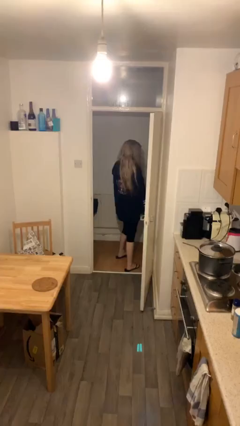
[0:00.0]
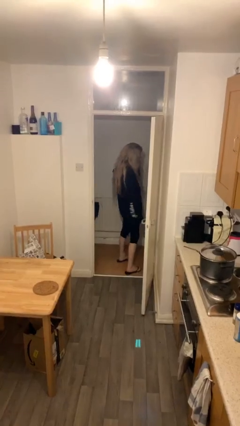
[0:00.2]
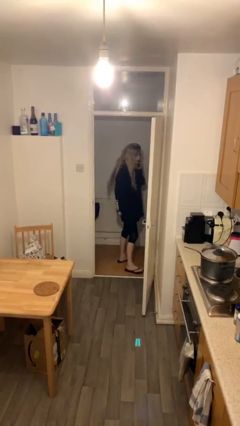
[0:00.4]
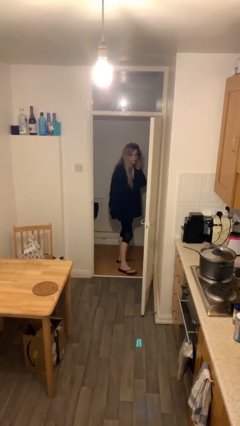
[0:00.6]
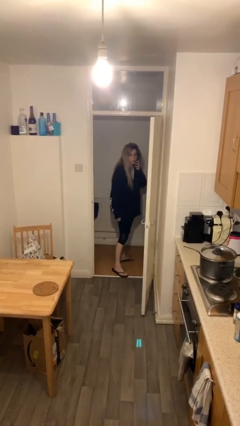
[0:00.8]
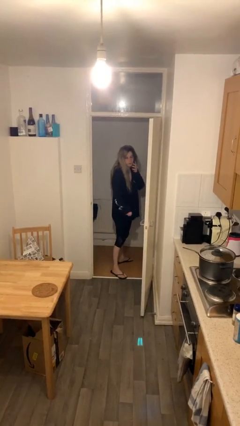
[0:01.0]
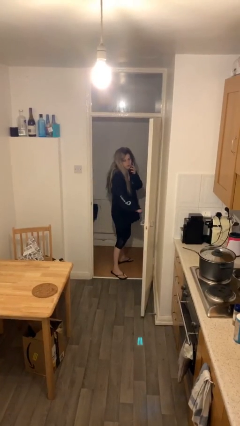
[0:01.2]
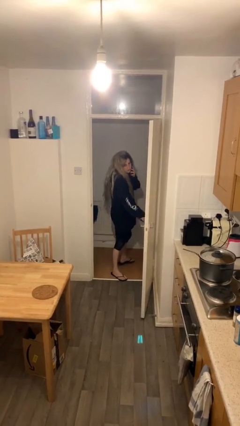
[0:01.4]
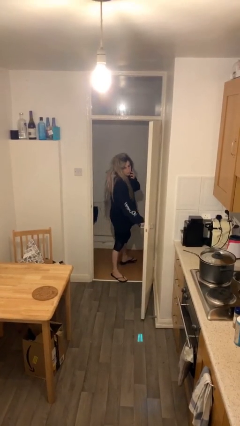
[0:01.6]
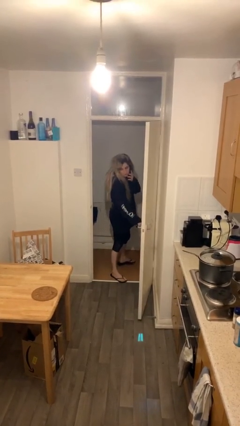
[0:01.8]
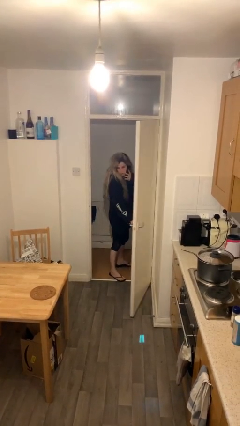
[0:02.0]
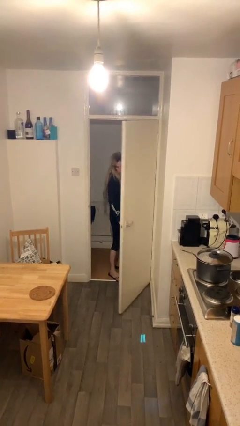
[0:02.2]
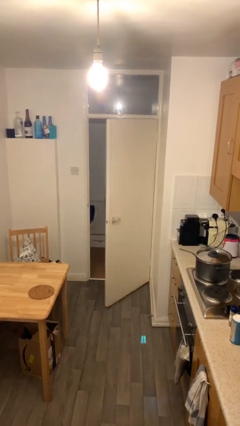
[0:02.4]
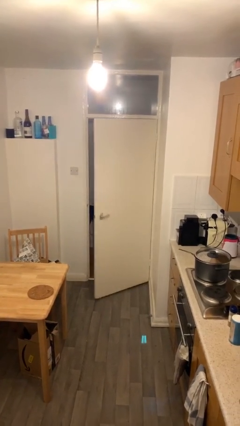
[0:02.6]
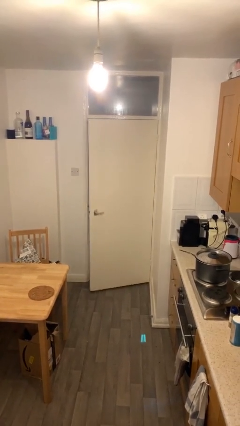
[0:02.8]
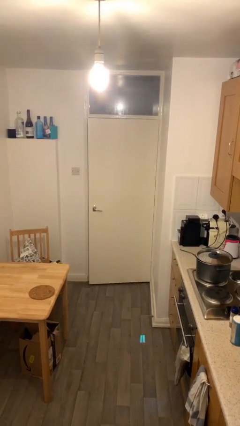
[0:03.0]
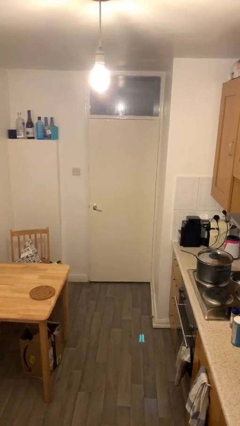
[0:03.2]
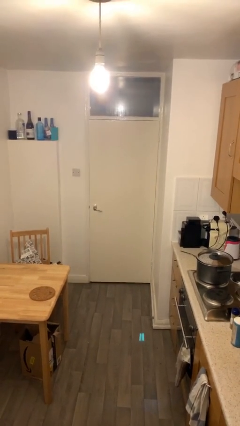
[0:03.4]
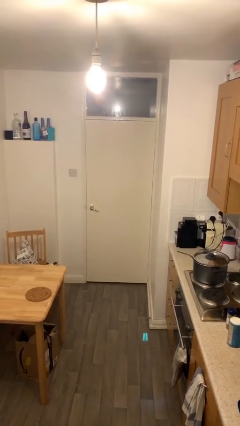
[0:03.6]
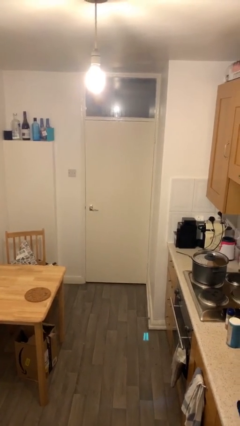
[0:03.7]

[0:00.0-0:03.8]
person closes facility door

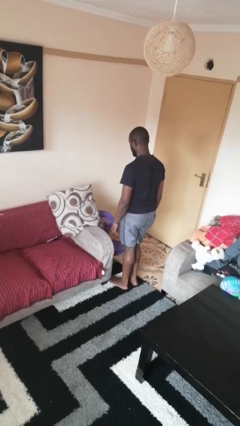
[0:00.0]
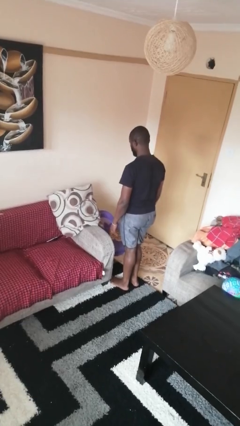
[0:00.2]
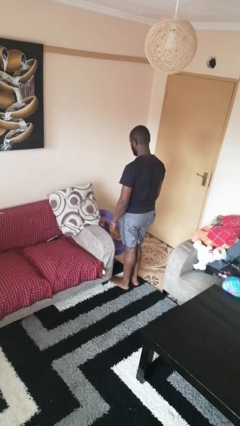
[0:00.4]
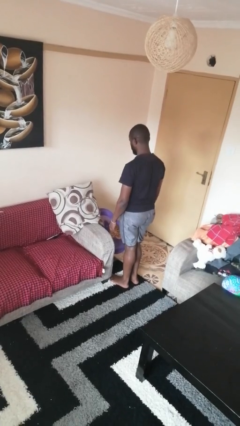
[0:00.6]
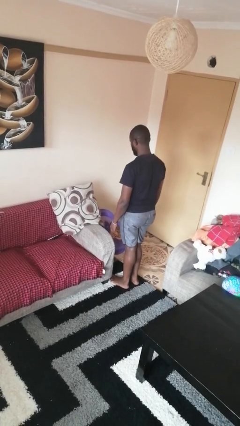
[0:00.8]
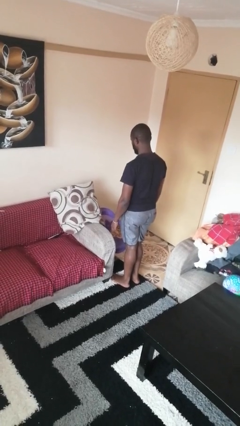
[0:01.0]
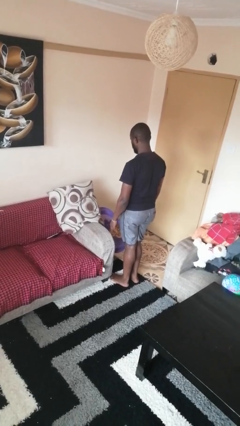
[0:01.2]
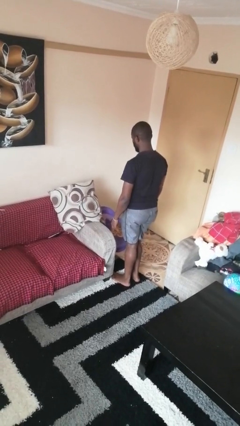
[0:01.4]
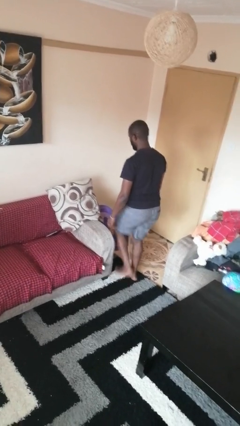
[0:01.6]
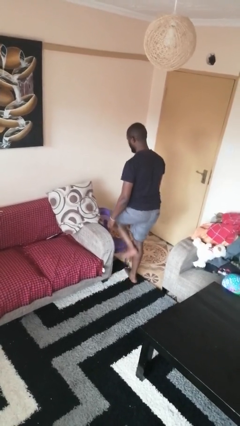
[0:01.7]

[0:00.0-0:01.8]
person climbs off chair

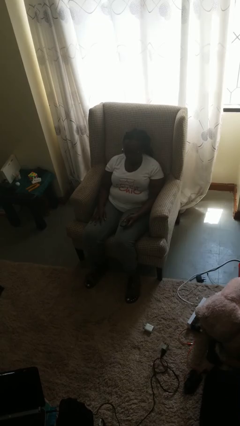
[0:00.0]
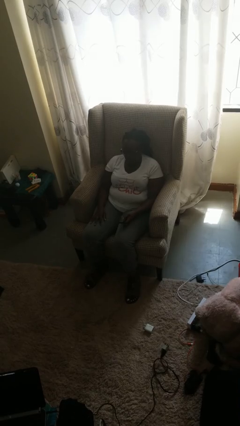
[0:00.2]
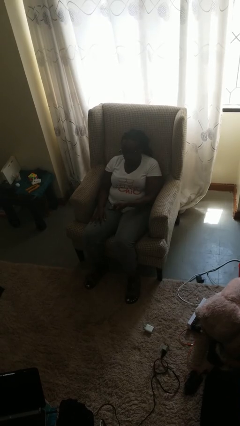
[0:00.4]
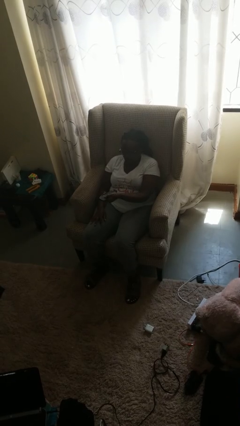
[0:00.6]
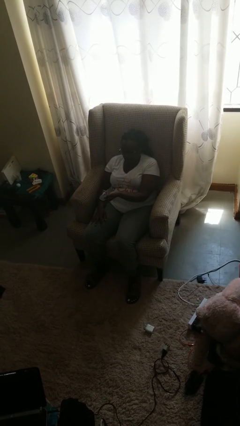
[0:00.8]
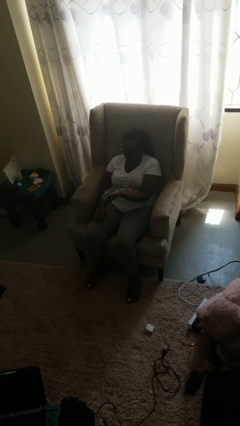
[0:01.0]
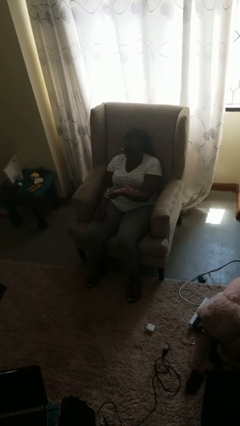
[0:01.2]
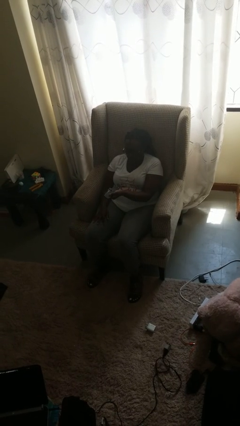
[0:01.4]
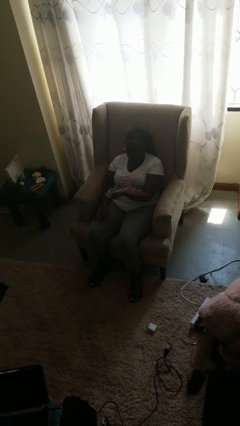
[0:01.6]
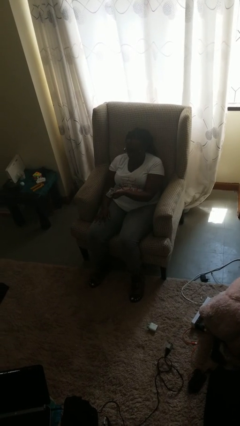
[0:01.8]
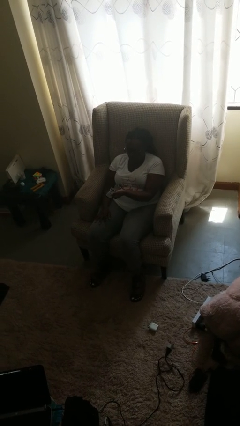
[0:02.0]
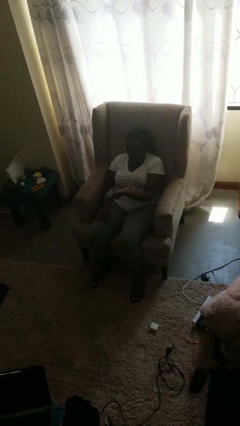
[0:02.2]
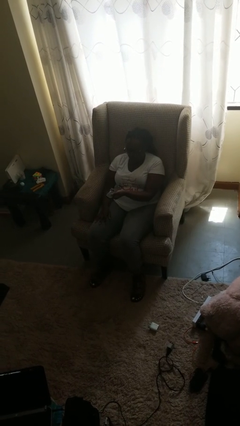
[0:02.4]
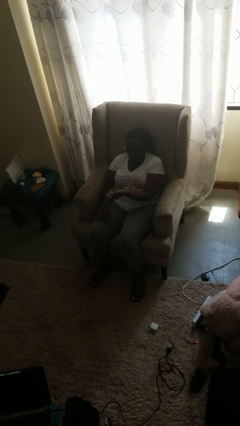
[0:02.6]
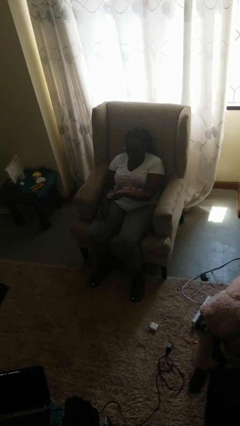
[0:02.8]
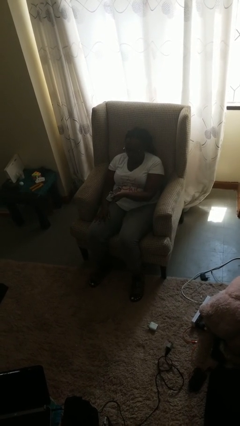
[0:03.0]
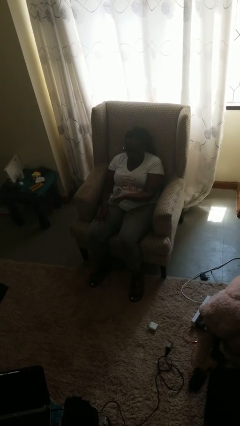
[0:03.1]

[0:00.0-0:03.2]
person uses television remote

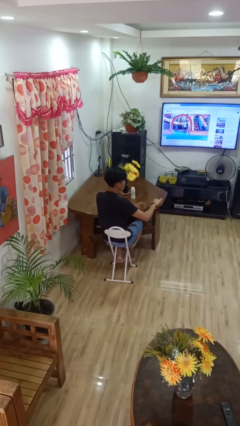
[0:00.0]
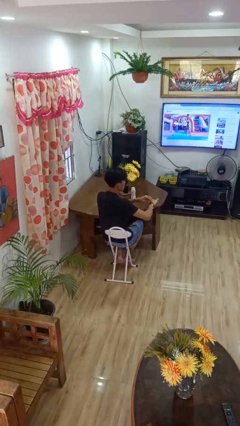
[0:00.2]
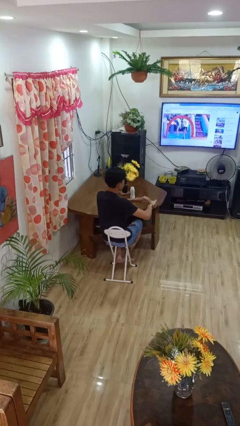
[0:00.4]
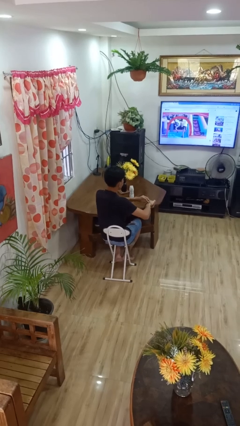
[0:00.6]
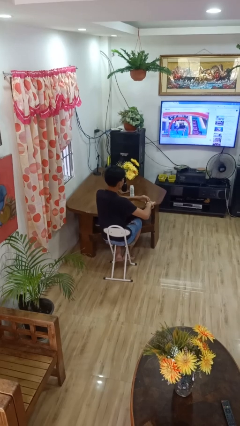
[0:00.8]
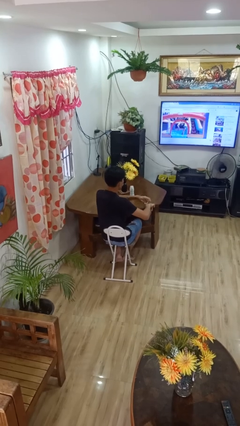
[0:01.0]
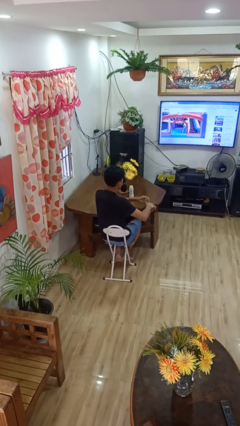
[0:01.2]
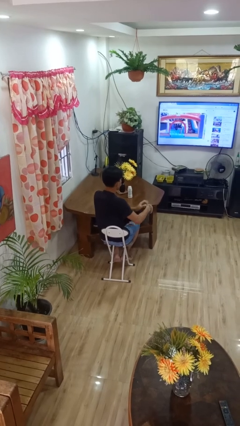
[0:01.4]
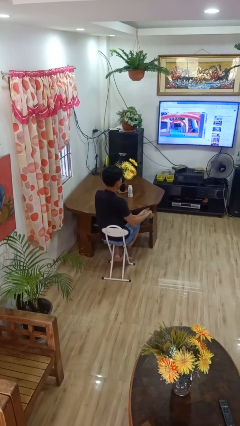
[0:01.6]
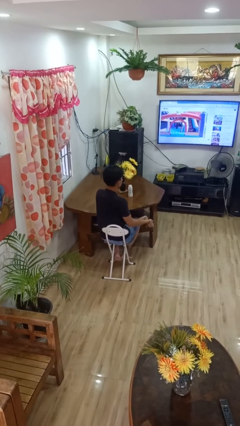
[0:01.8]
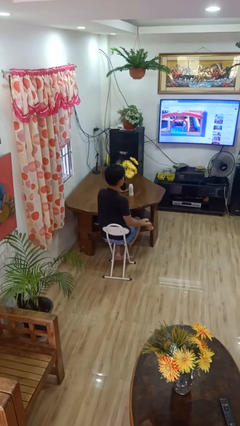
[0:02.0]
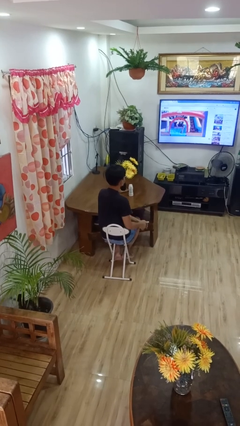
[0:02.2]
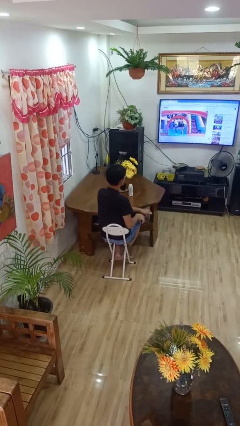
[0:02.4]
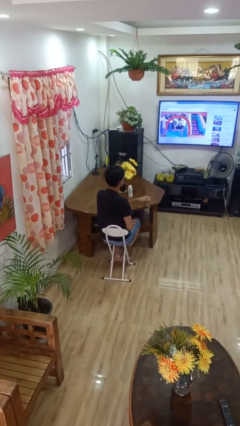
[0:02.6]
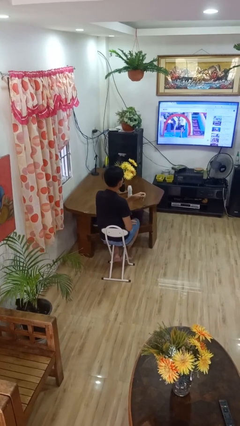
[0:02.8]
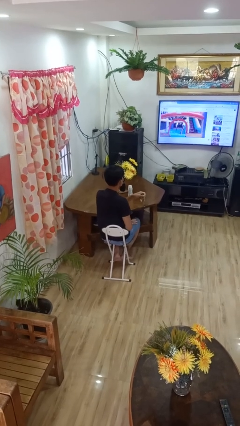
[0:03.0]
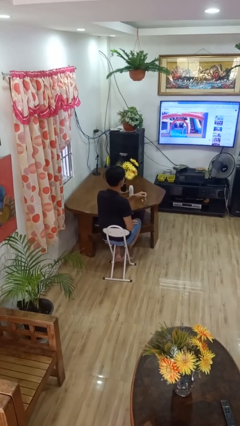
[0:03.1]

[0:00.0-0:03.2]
person takes off wristwatch

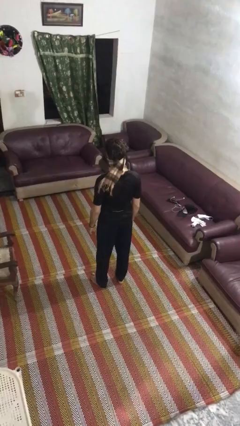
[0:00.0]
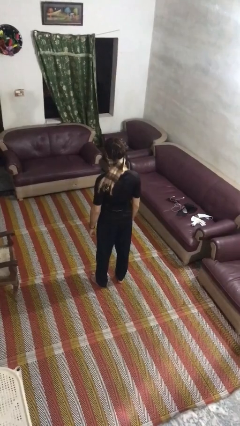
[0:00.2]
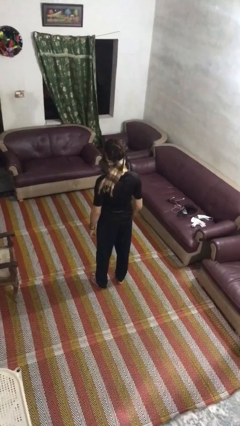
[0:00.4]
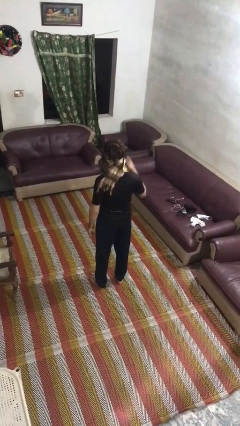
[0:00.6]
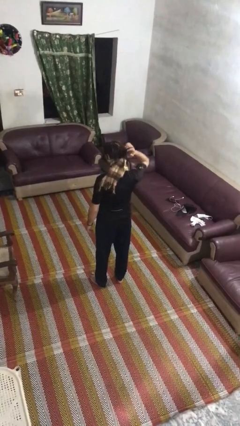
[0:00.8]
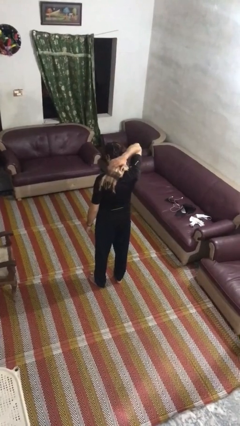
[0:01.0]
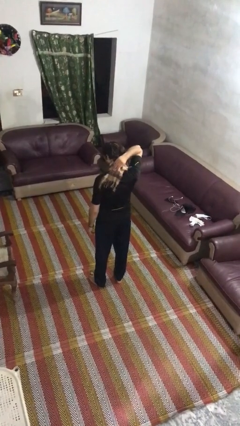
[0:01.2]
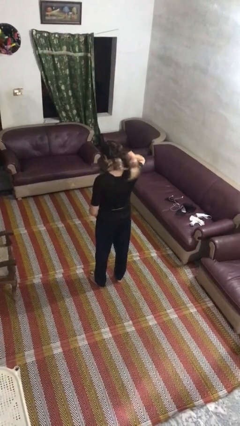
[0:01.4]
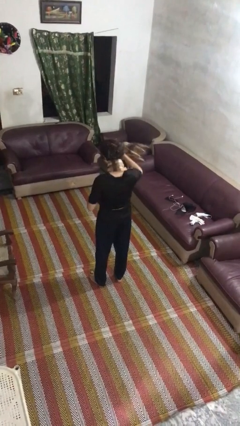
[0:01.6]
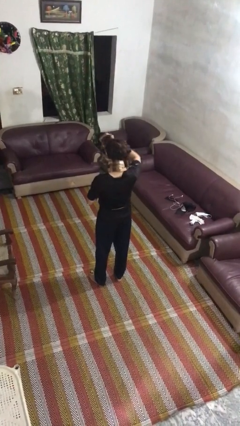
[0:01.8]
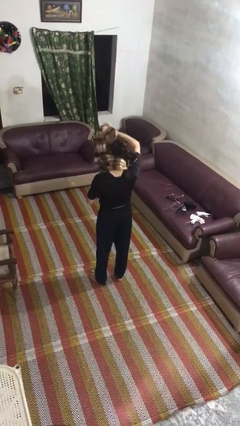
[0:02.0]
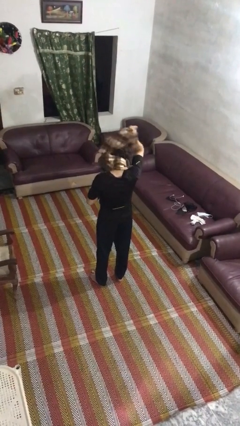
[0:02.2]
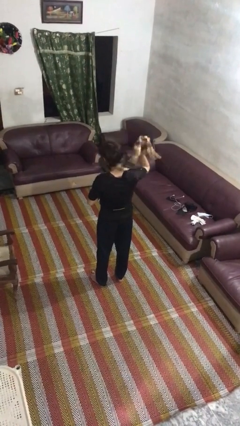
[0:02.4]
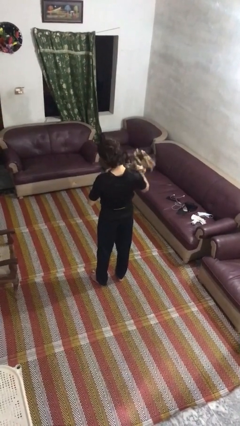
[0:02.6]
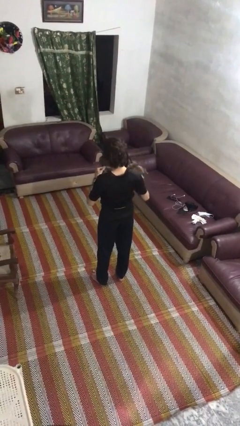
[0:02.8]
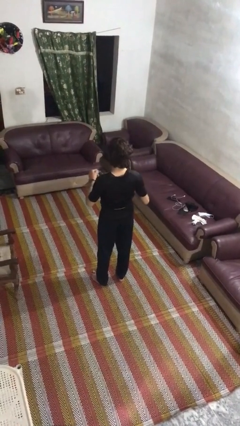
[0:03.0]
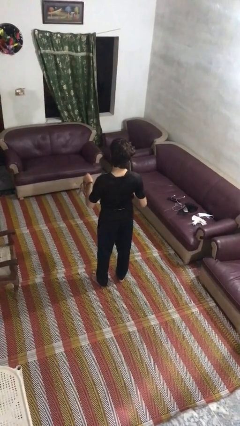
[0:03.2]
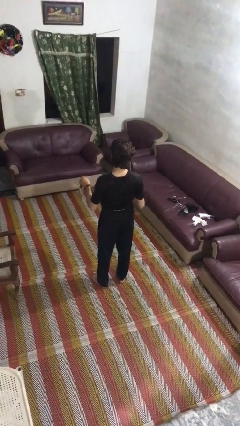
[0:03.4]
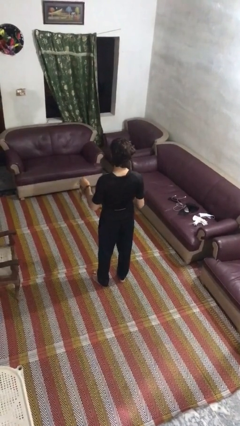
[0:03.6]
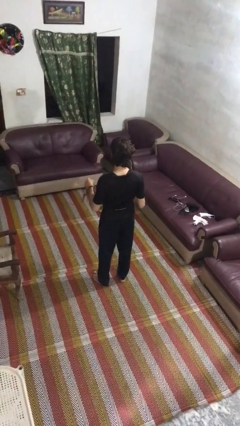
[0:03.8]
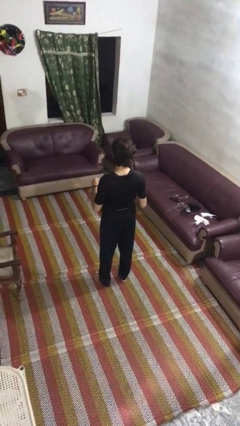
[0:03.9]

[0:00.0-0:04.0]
person takes off scarf

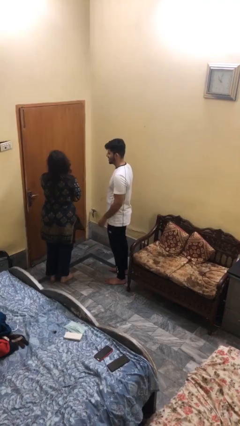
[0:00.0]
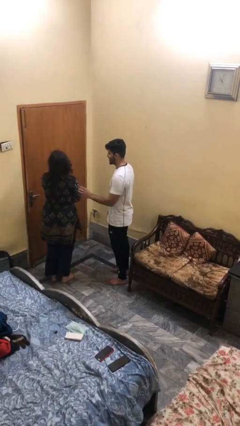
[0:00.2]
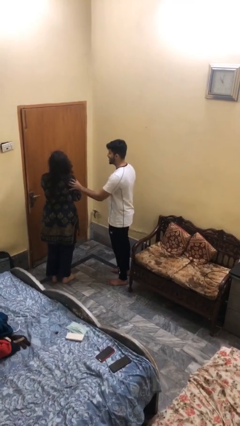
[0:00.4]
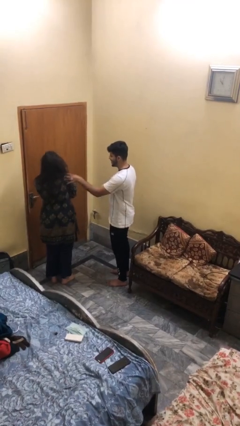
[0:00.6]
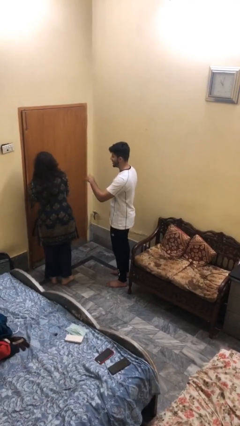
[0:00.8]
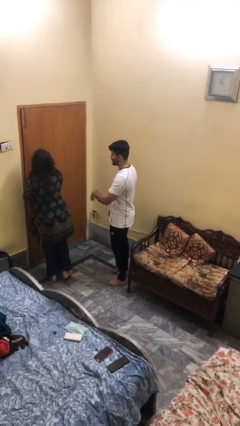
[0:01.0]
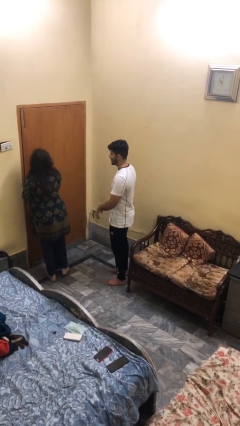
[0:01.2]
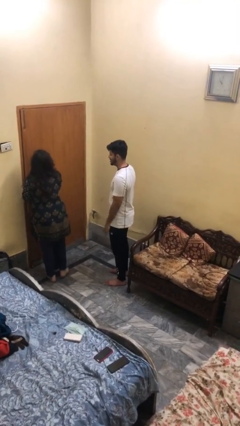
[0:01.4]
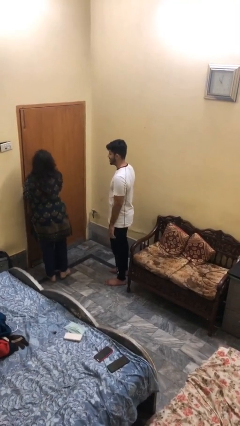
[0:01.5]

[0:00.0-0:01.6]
person shoves person

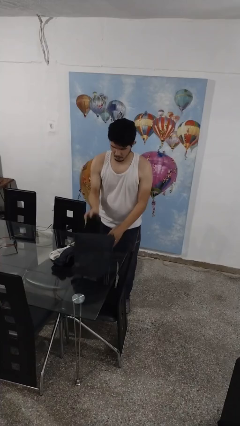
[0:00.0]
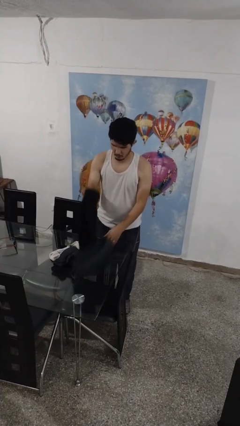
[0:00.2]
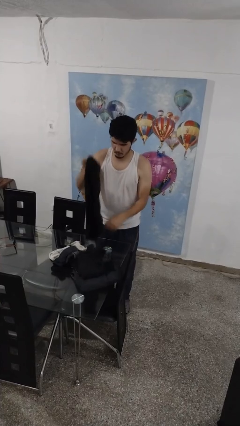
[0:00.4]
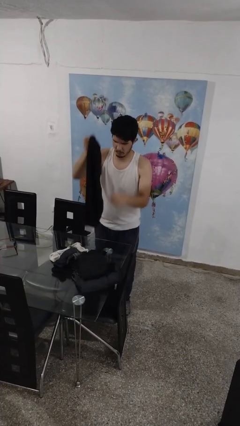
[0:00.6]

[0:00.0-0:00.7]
person folds pants
